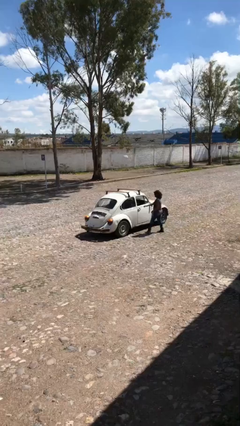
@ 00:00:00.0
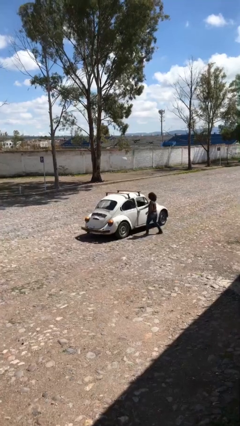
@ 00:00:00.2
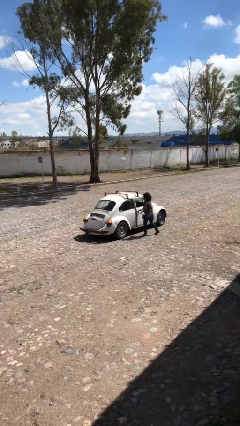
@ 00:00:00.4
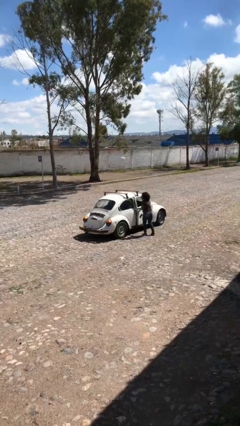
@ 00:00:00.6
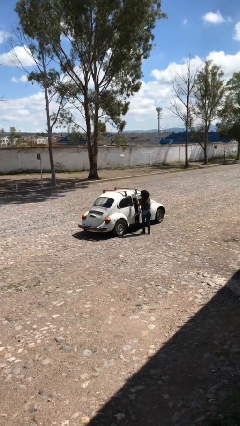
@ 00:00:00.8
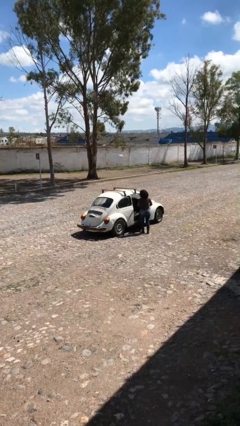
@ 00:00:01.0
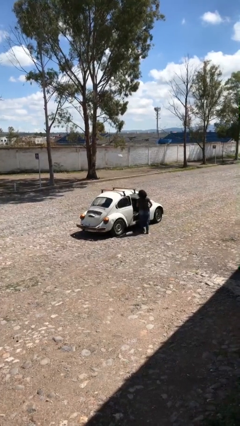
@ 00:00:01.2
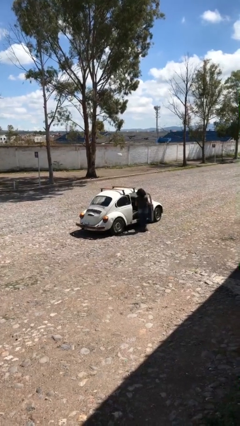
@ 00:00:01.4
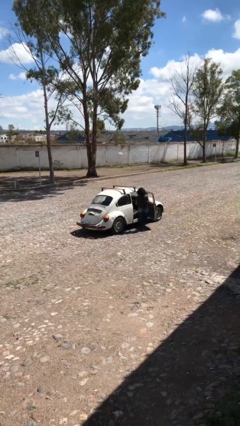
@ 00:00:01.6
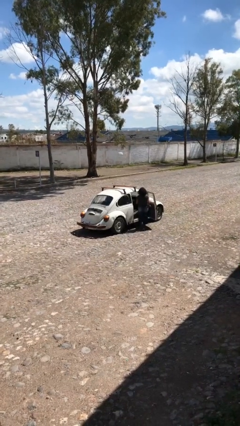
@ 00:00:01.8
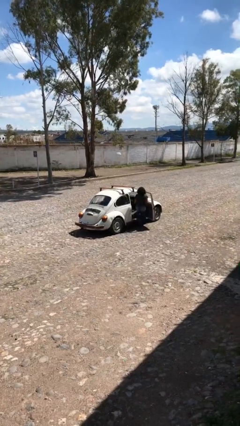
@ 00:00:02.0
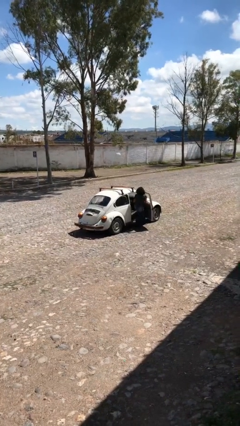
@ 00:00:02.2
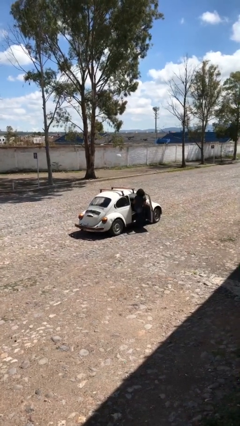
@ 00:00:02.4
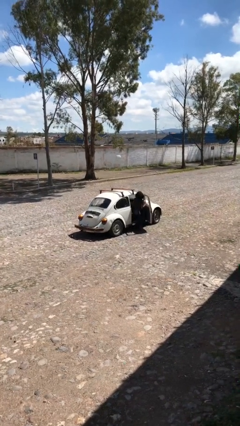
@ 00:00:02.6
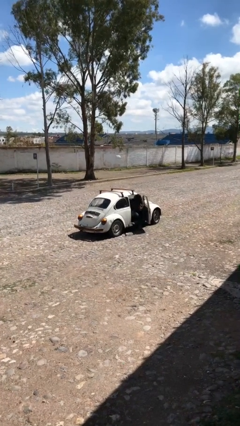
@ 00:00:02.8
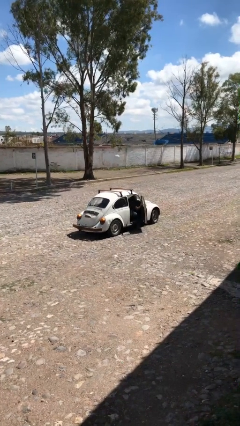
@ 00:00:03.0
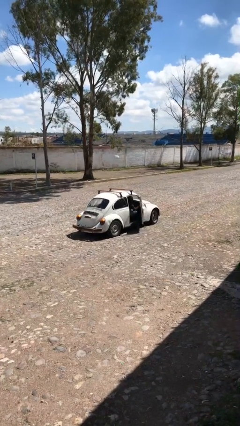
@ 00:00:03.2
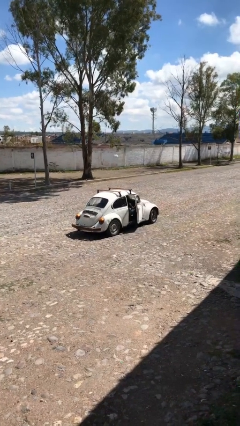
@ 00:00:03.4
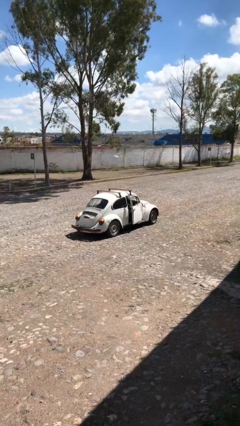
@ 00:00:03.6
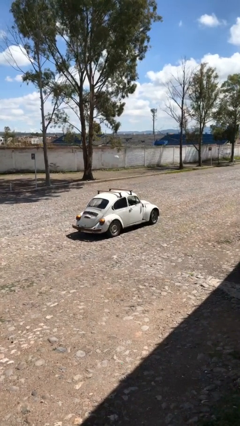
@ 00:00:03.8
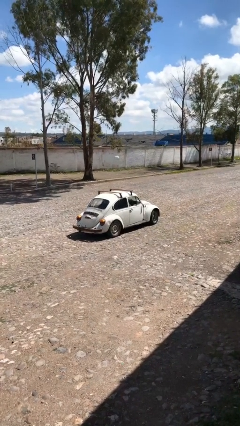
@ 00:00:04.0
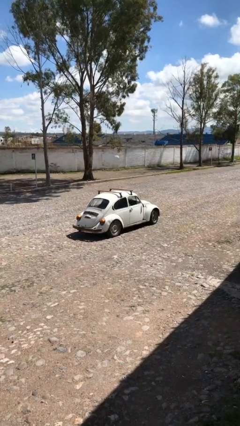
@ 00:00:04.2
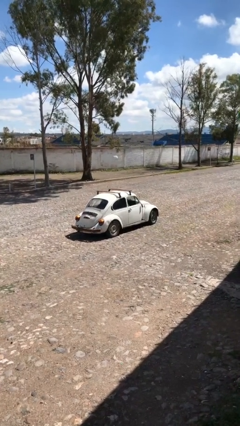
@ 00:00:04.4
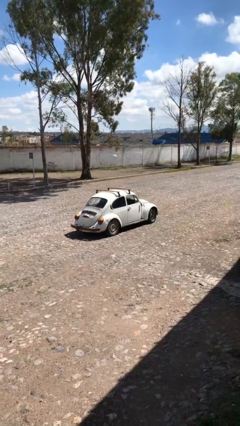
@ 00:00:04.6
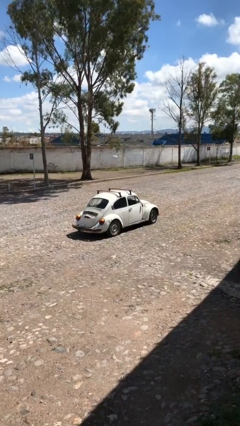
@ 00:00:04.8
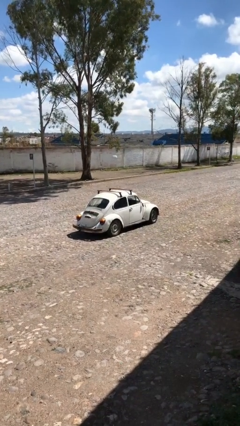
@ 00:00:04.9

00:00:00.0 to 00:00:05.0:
car picks up person

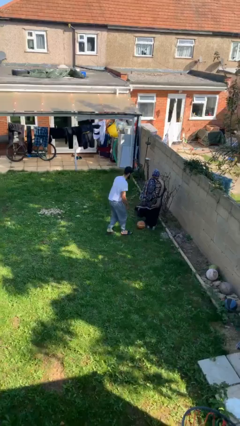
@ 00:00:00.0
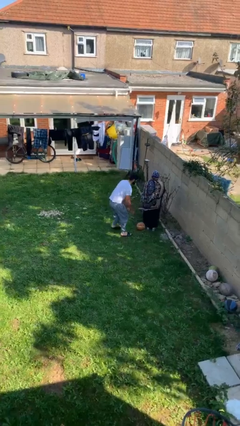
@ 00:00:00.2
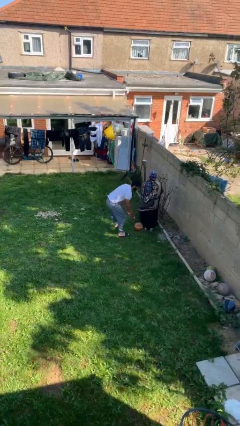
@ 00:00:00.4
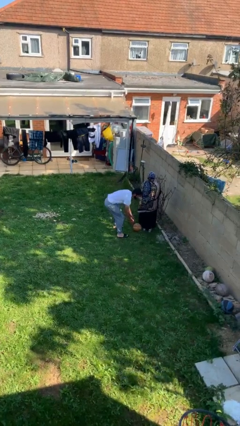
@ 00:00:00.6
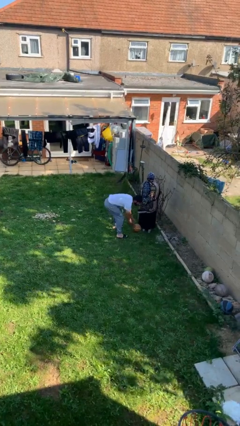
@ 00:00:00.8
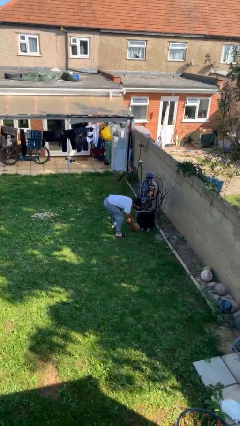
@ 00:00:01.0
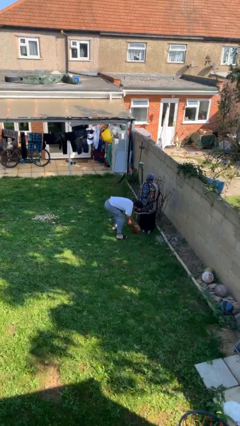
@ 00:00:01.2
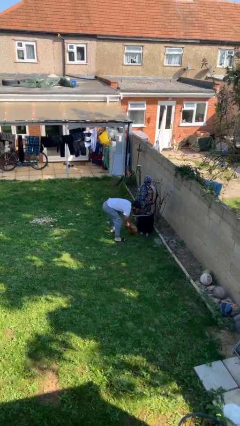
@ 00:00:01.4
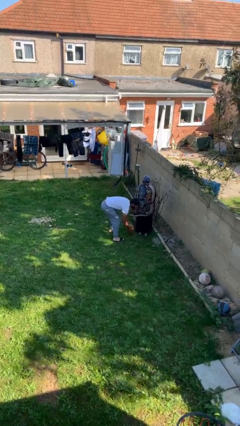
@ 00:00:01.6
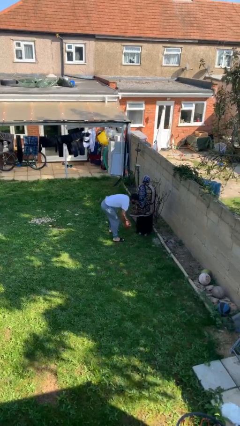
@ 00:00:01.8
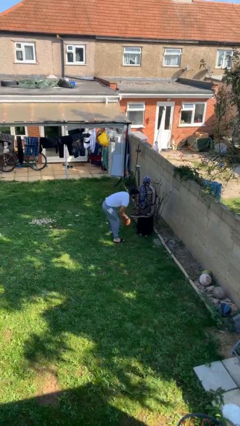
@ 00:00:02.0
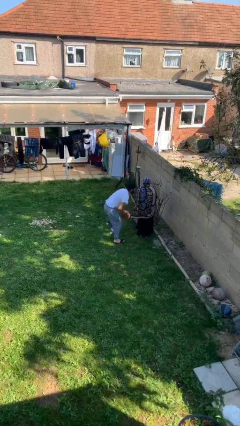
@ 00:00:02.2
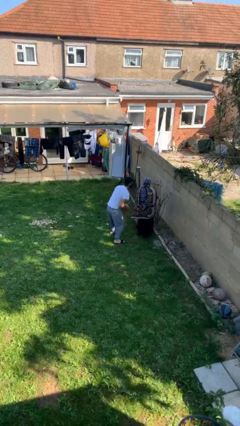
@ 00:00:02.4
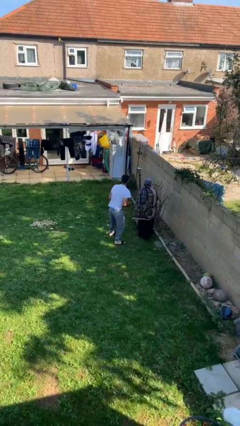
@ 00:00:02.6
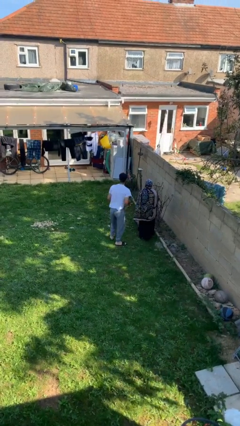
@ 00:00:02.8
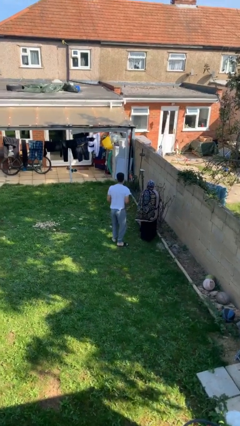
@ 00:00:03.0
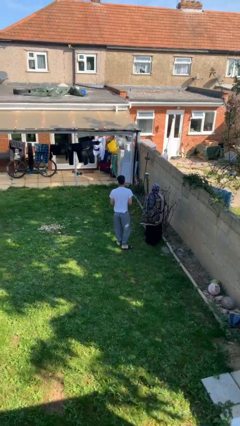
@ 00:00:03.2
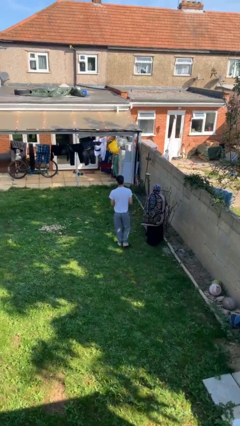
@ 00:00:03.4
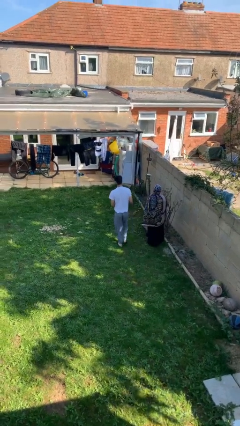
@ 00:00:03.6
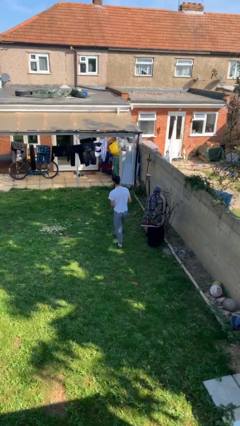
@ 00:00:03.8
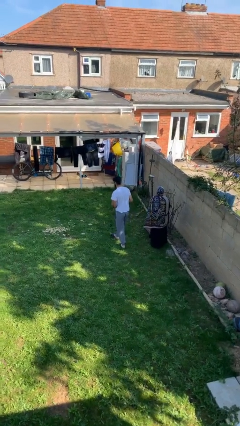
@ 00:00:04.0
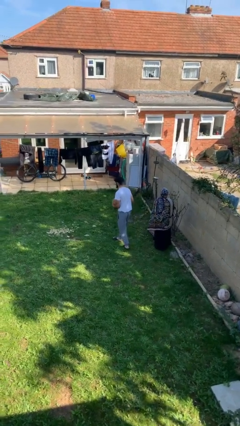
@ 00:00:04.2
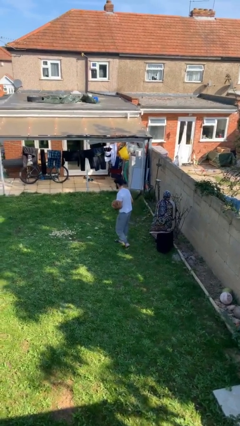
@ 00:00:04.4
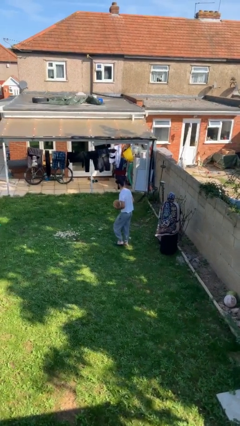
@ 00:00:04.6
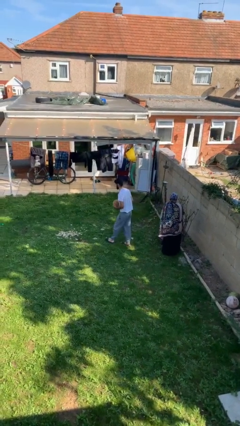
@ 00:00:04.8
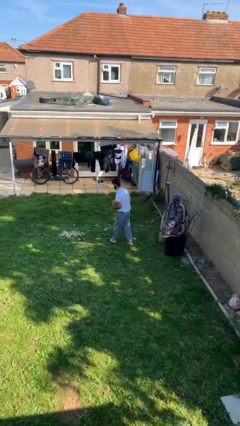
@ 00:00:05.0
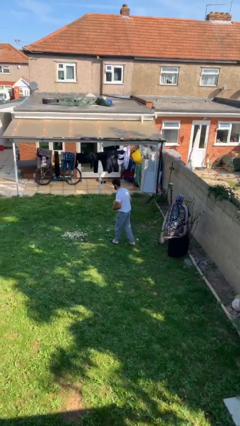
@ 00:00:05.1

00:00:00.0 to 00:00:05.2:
person steals object from person

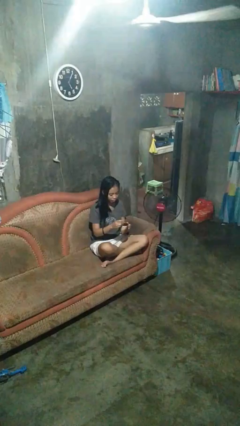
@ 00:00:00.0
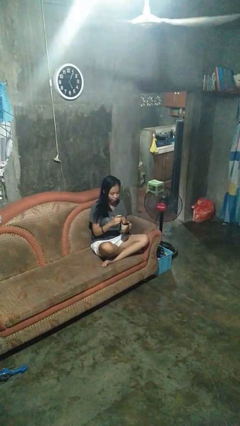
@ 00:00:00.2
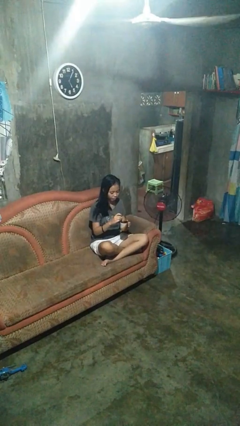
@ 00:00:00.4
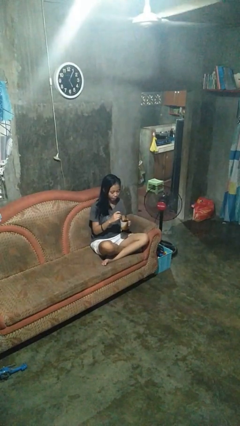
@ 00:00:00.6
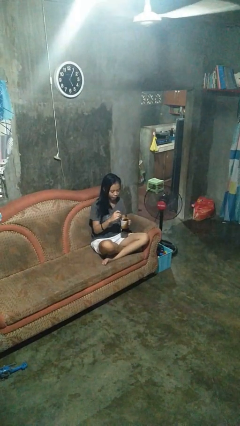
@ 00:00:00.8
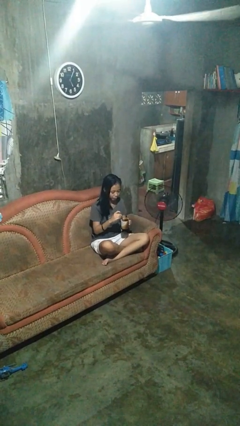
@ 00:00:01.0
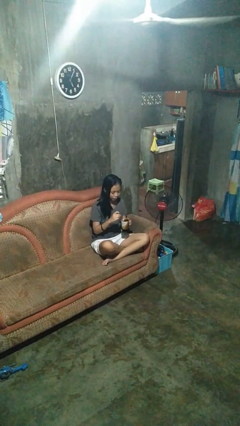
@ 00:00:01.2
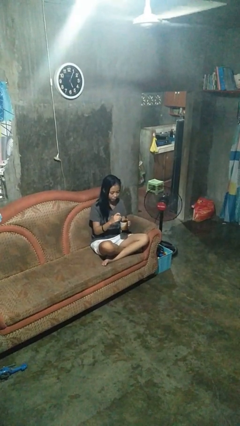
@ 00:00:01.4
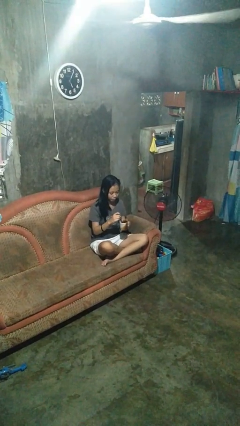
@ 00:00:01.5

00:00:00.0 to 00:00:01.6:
person stirs mug

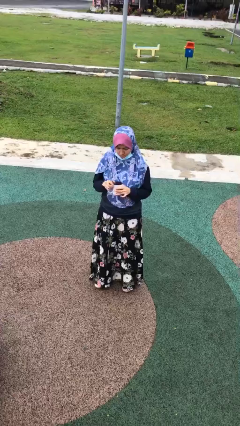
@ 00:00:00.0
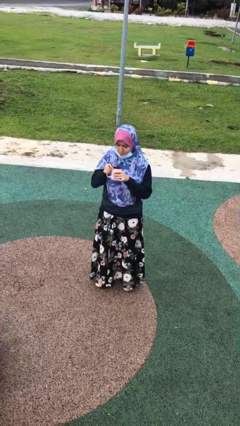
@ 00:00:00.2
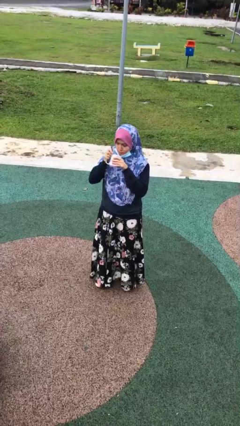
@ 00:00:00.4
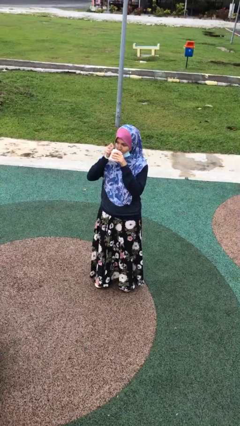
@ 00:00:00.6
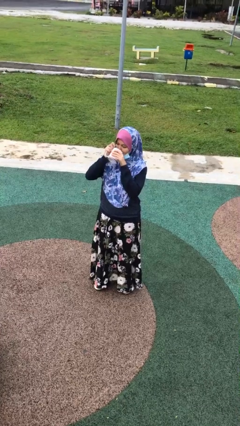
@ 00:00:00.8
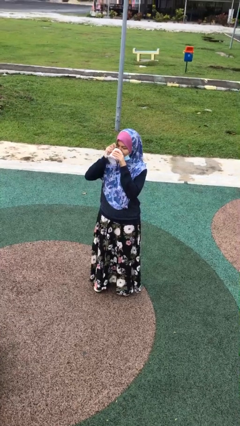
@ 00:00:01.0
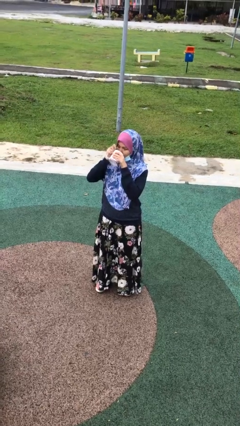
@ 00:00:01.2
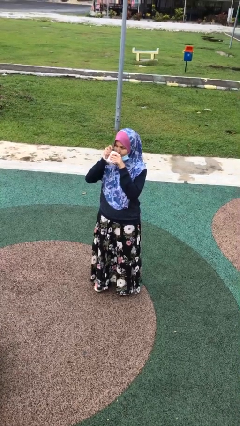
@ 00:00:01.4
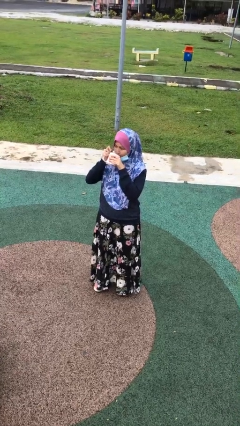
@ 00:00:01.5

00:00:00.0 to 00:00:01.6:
person drinks from mug

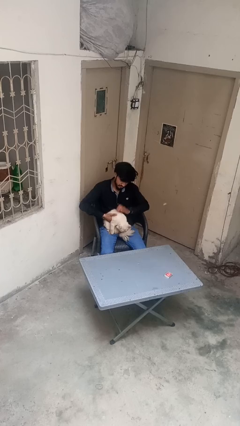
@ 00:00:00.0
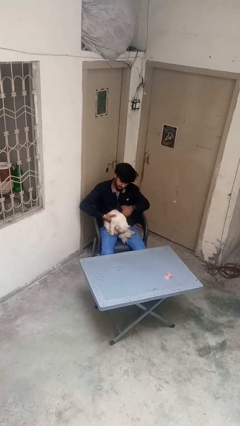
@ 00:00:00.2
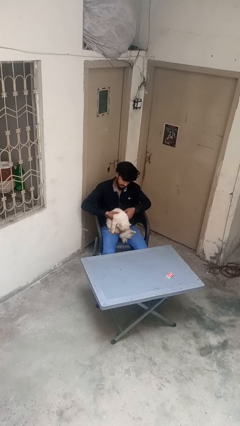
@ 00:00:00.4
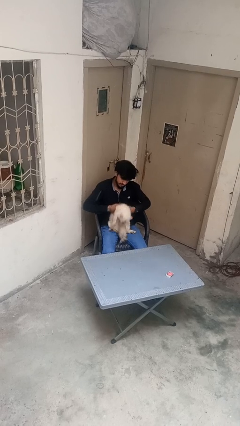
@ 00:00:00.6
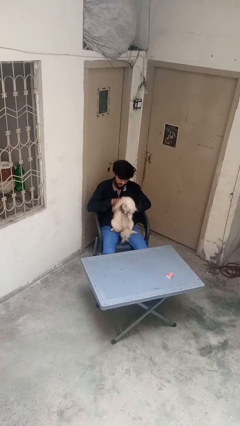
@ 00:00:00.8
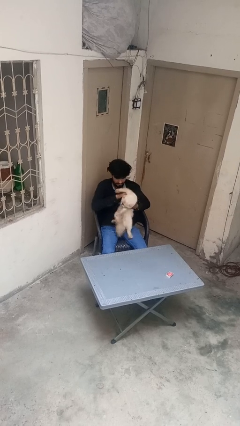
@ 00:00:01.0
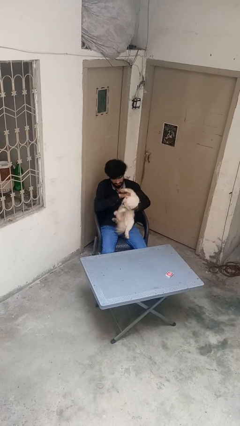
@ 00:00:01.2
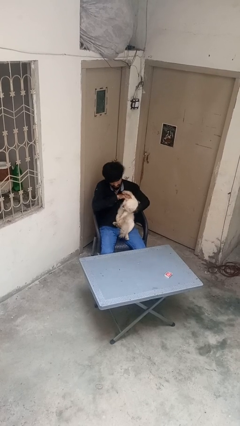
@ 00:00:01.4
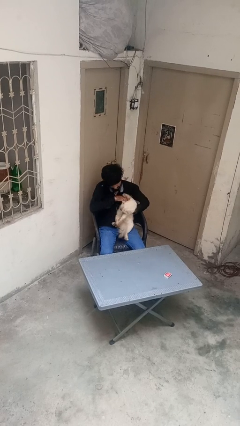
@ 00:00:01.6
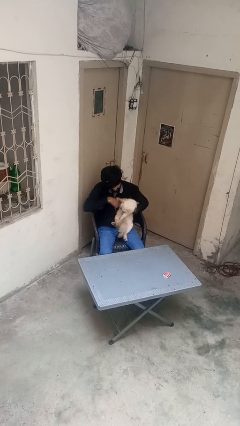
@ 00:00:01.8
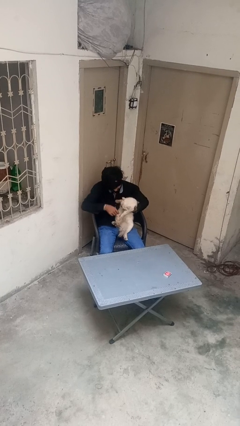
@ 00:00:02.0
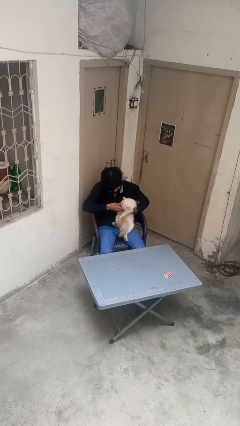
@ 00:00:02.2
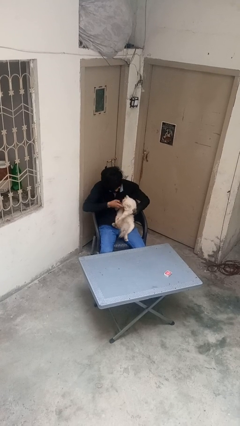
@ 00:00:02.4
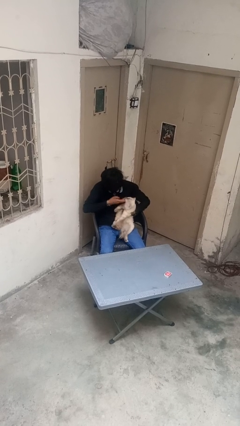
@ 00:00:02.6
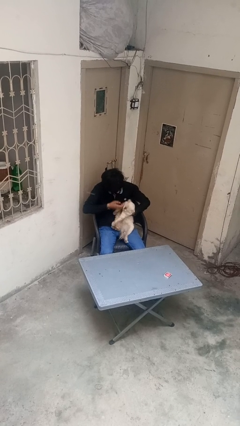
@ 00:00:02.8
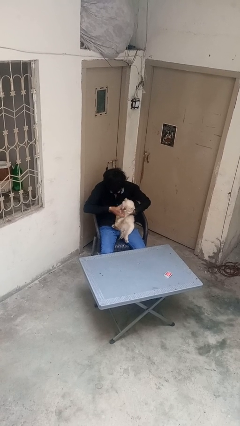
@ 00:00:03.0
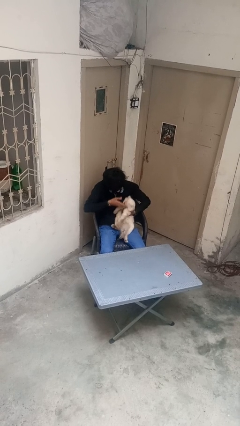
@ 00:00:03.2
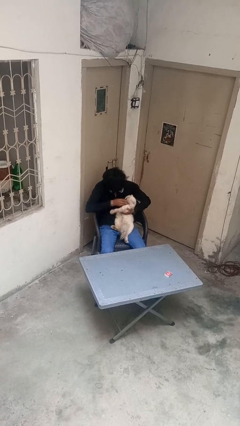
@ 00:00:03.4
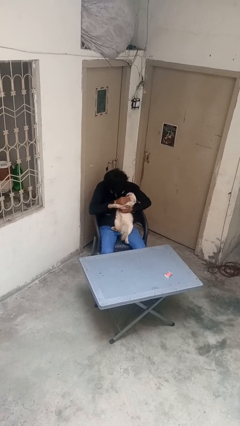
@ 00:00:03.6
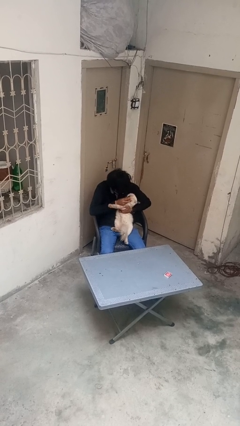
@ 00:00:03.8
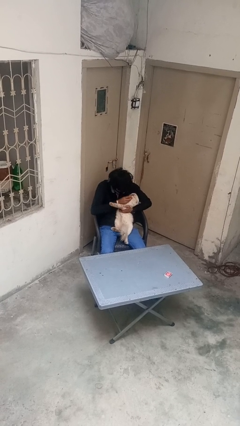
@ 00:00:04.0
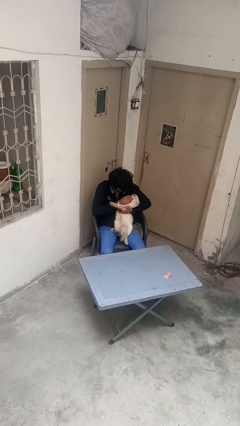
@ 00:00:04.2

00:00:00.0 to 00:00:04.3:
person pets cat
